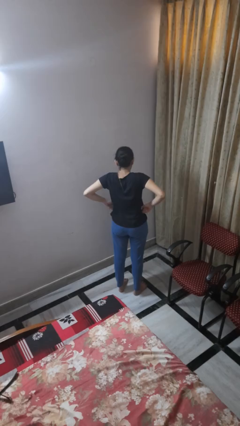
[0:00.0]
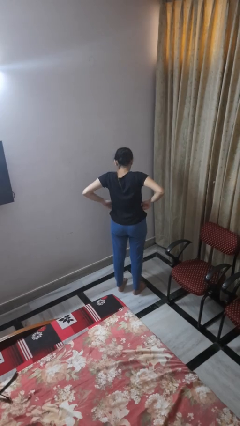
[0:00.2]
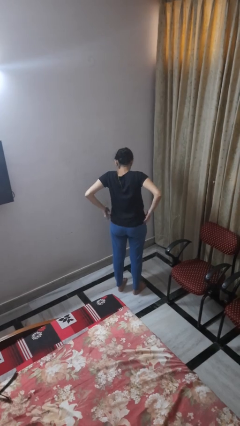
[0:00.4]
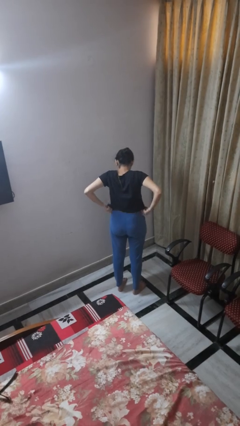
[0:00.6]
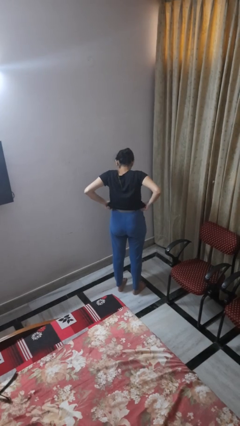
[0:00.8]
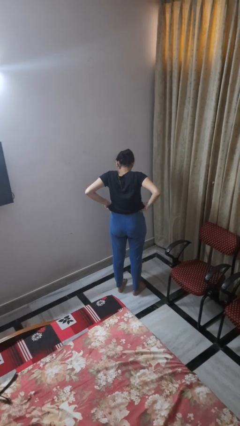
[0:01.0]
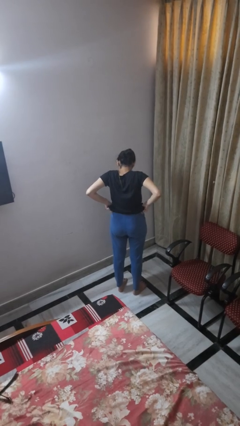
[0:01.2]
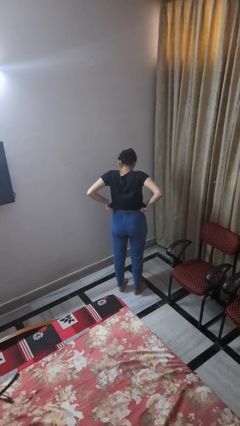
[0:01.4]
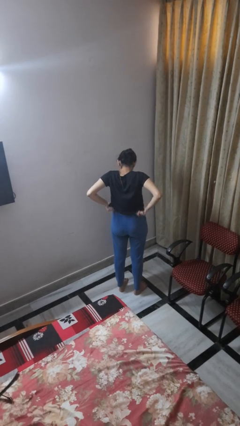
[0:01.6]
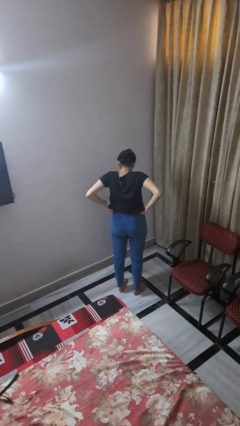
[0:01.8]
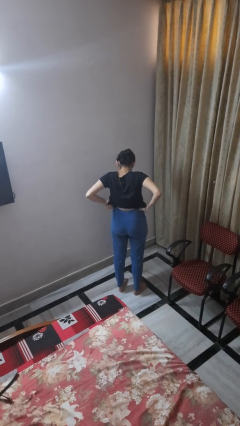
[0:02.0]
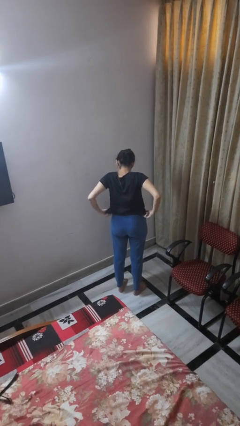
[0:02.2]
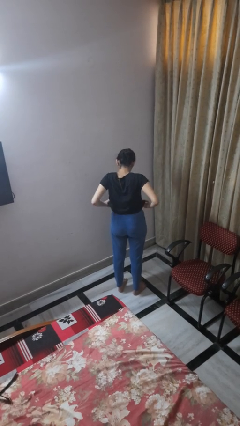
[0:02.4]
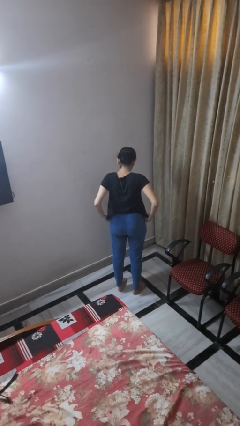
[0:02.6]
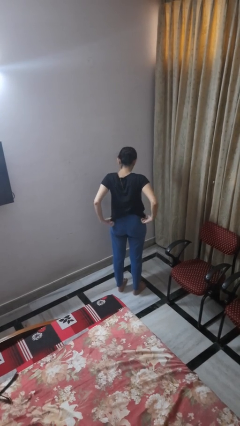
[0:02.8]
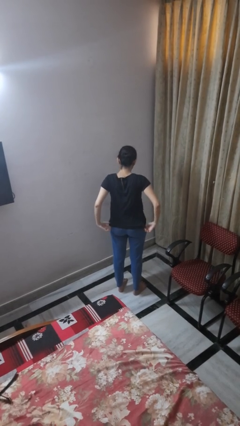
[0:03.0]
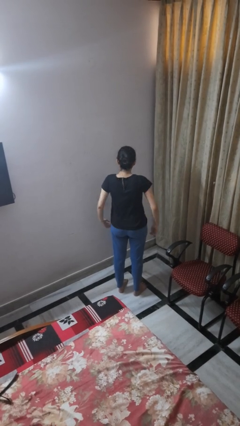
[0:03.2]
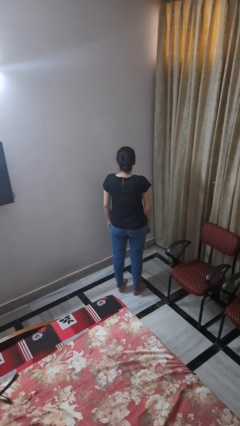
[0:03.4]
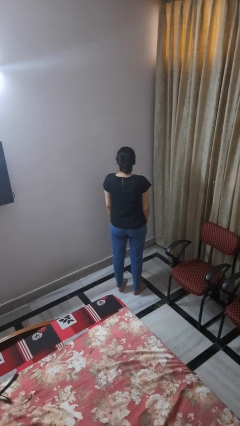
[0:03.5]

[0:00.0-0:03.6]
person hikes up pants

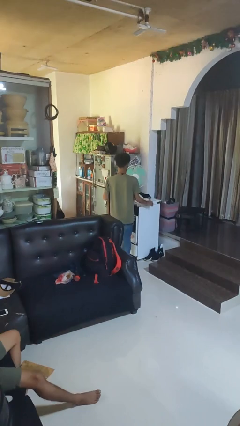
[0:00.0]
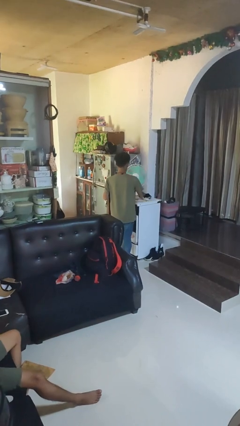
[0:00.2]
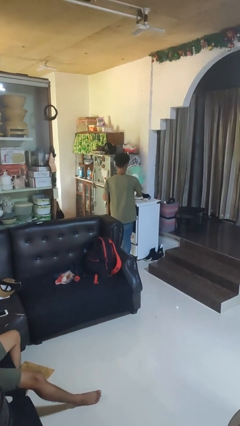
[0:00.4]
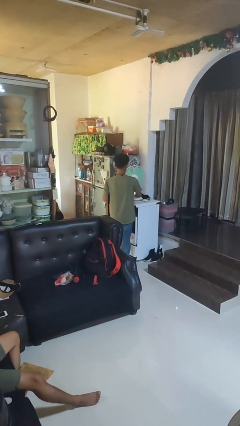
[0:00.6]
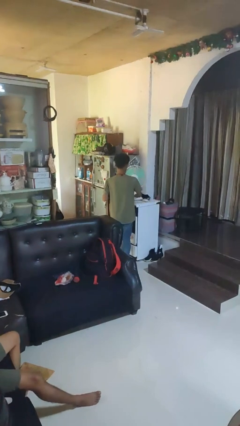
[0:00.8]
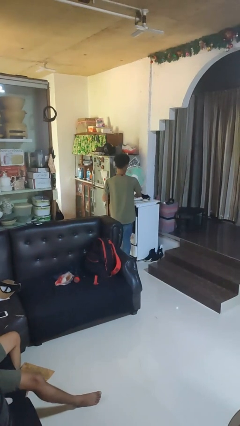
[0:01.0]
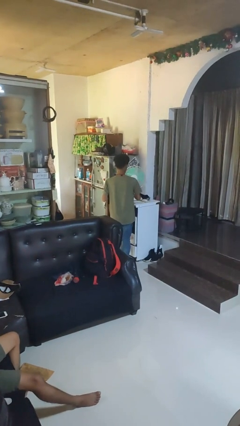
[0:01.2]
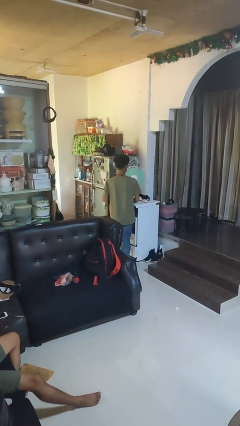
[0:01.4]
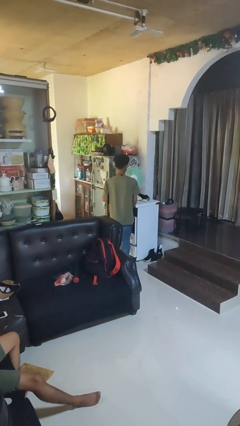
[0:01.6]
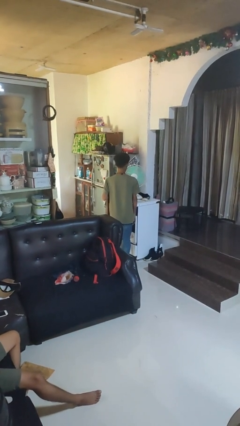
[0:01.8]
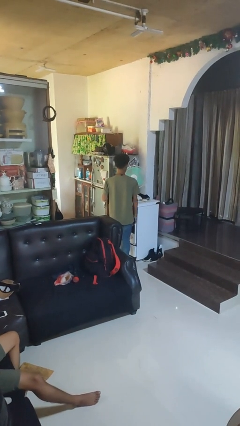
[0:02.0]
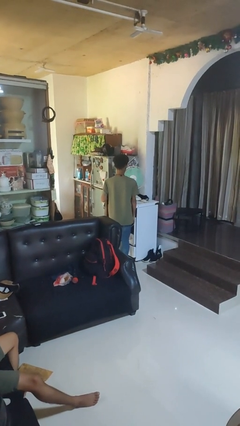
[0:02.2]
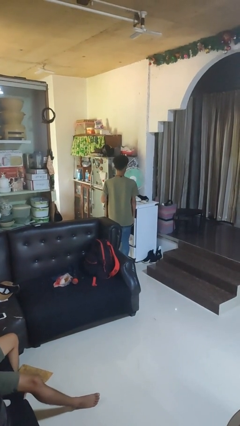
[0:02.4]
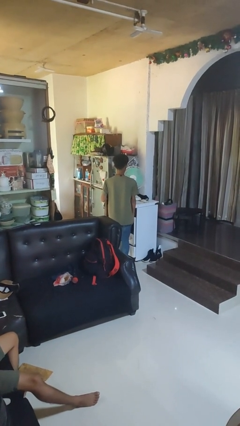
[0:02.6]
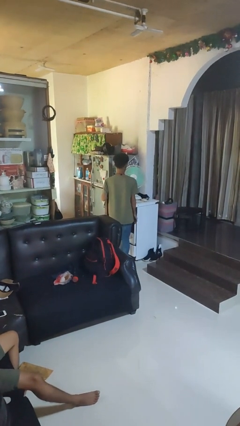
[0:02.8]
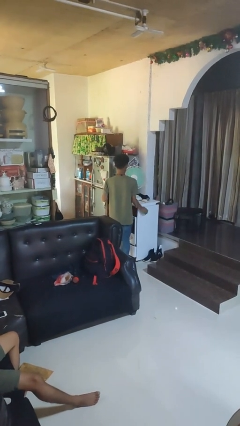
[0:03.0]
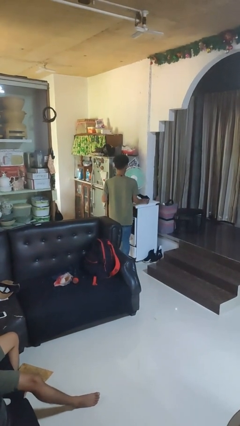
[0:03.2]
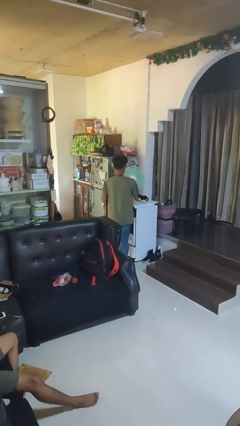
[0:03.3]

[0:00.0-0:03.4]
person turns on fan

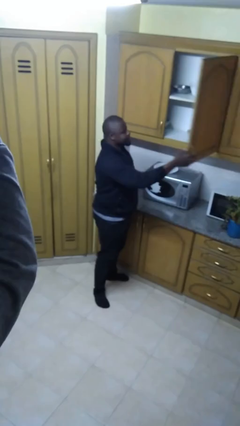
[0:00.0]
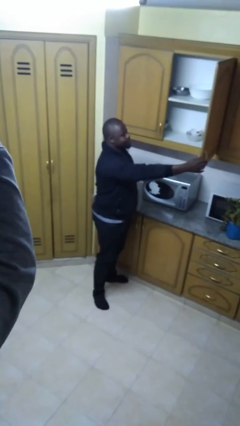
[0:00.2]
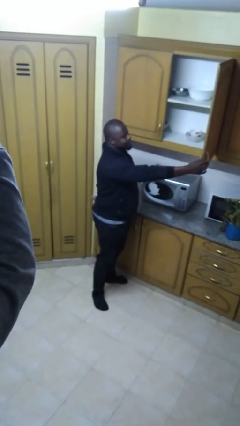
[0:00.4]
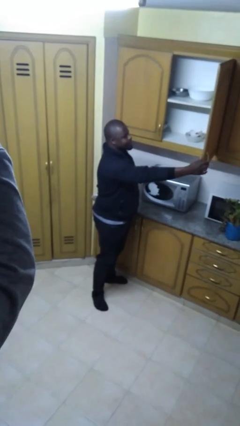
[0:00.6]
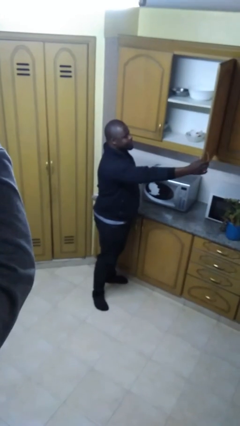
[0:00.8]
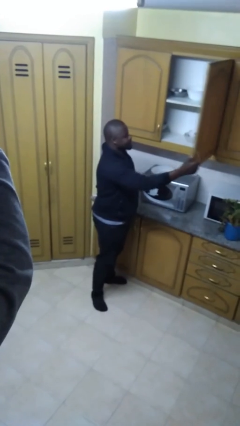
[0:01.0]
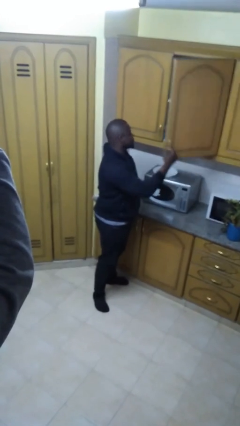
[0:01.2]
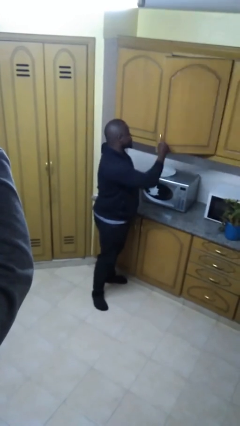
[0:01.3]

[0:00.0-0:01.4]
person opens cabinet

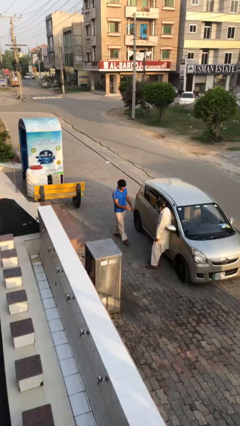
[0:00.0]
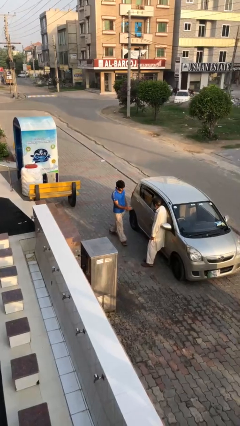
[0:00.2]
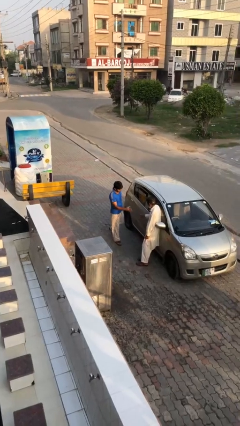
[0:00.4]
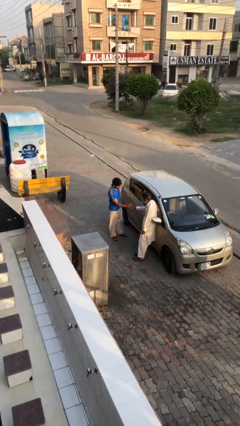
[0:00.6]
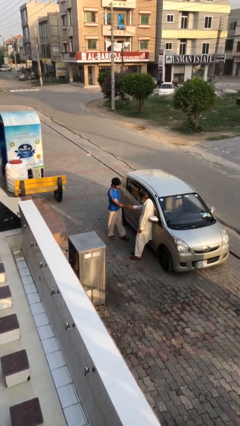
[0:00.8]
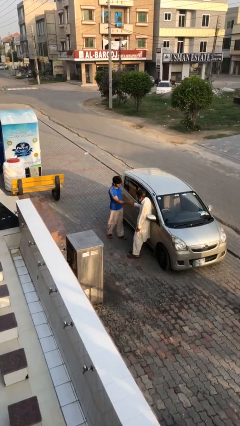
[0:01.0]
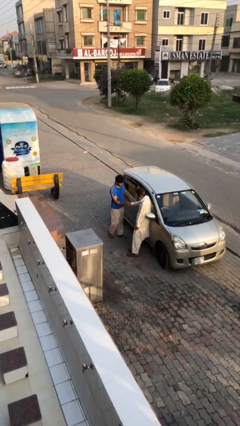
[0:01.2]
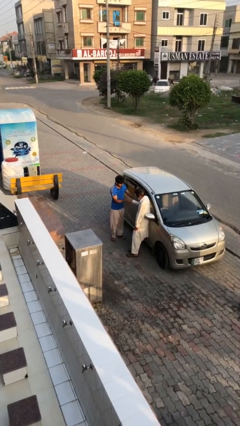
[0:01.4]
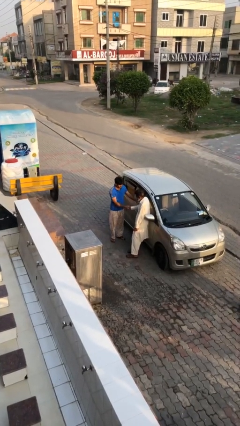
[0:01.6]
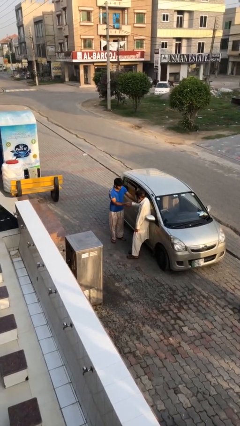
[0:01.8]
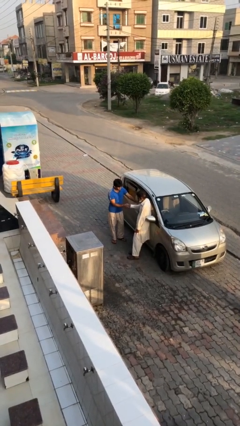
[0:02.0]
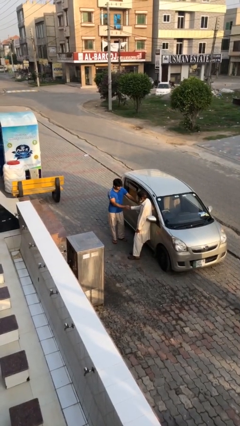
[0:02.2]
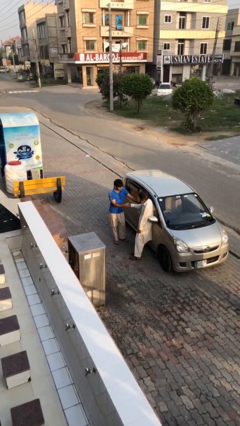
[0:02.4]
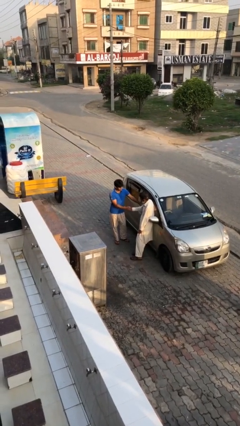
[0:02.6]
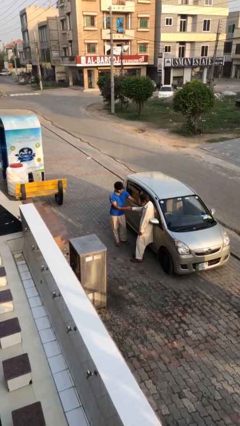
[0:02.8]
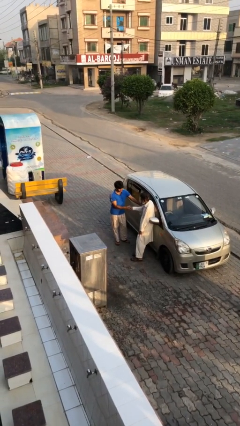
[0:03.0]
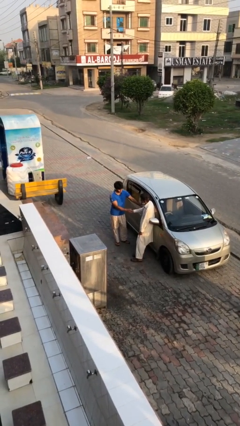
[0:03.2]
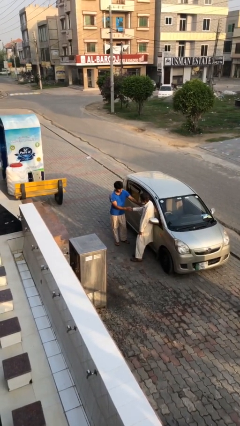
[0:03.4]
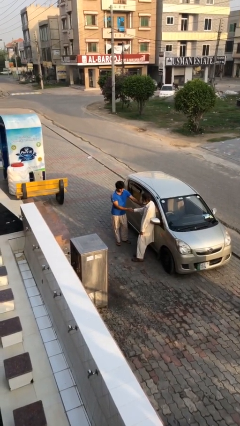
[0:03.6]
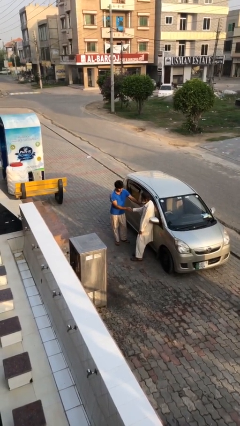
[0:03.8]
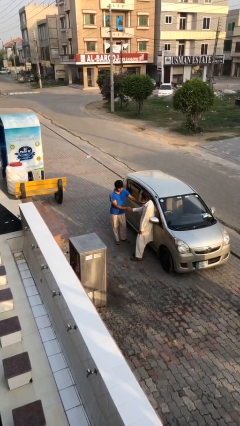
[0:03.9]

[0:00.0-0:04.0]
person shakes hand

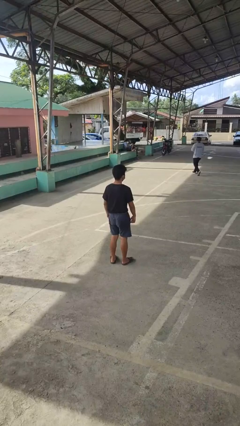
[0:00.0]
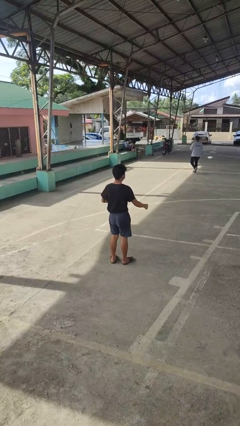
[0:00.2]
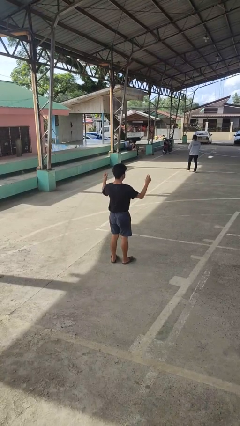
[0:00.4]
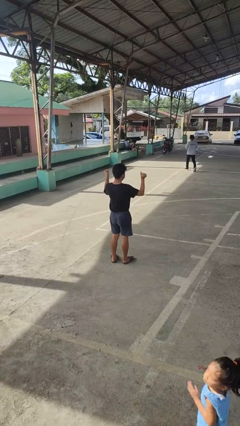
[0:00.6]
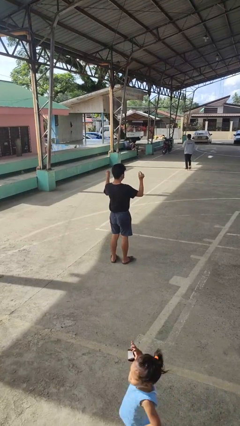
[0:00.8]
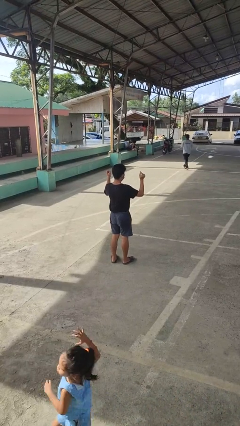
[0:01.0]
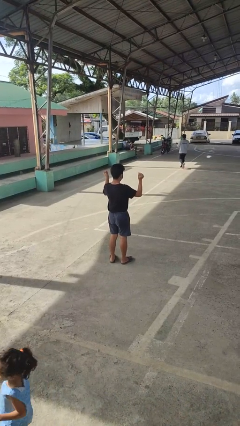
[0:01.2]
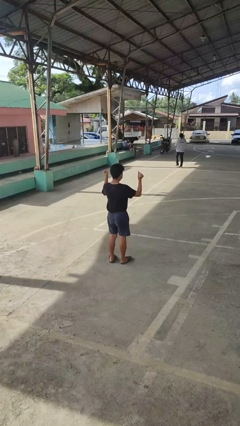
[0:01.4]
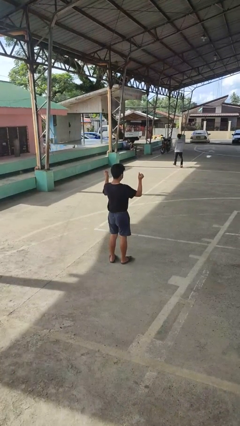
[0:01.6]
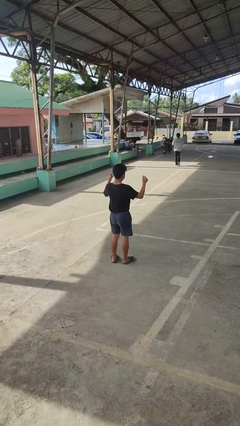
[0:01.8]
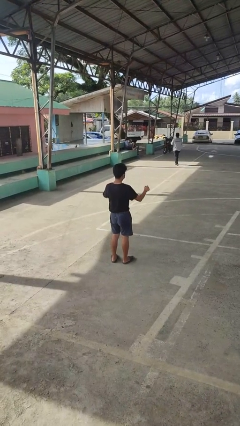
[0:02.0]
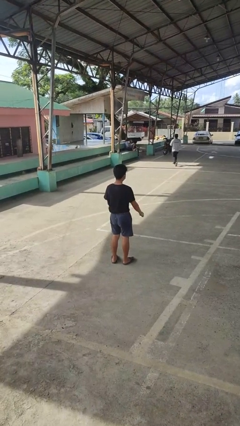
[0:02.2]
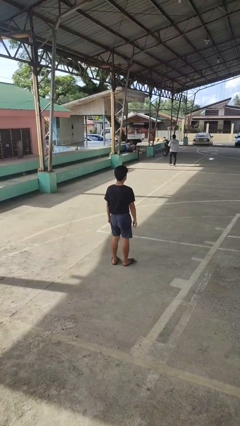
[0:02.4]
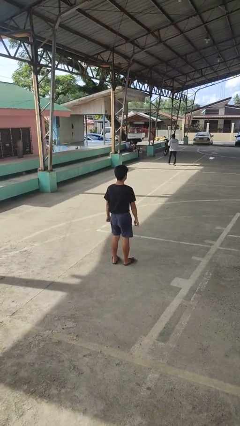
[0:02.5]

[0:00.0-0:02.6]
person snaps fingers

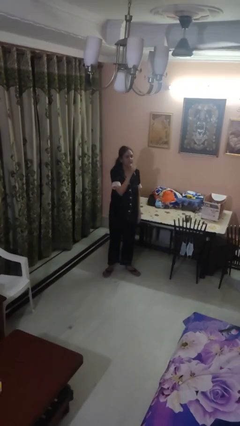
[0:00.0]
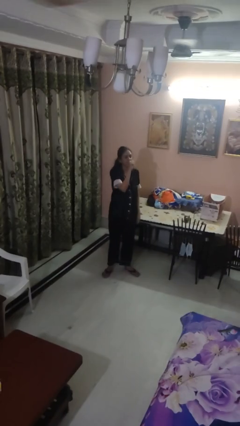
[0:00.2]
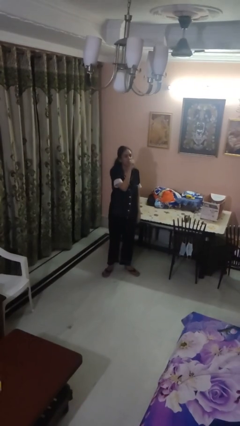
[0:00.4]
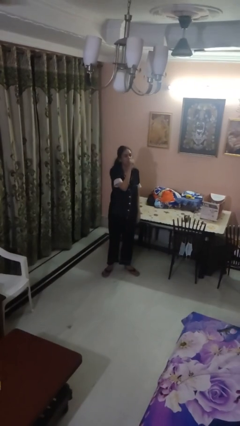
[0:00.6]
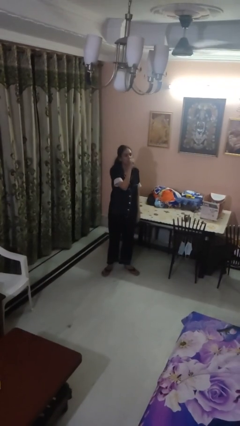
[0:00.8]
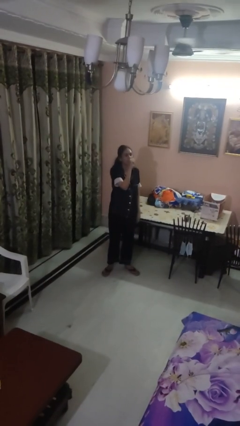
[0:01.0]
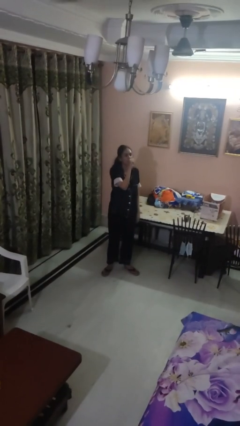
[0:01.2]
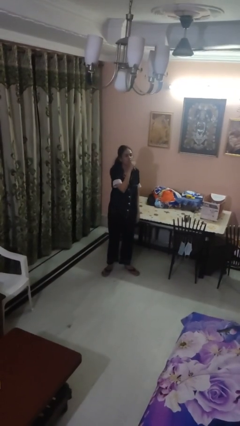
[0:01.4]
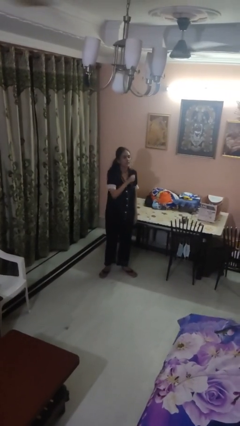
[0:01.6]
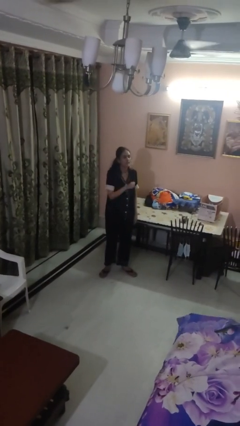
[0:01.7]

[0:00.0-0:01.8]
person vapes

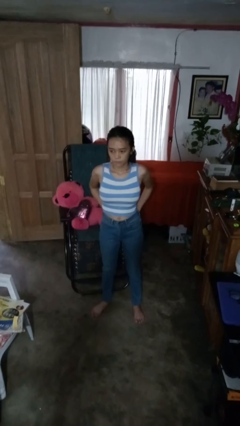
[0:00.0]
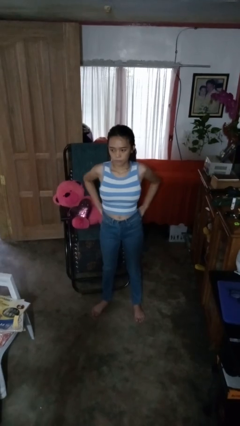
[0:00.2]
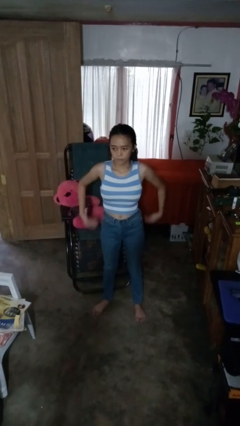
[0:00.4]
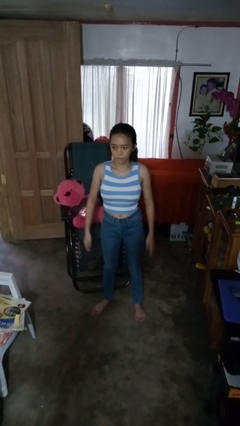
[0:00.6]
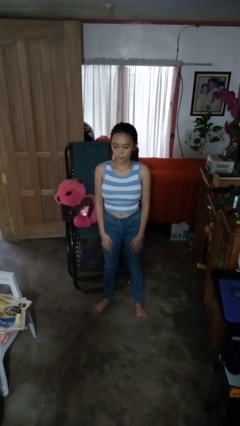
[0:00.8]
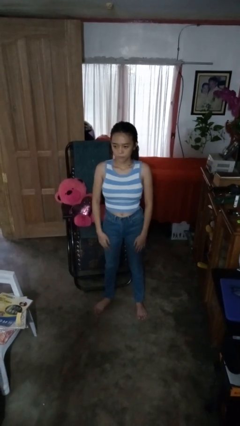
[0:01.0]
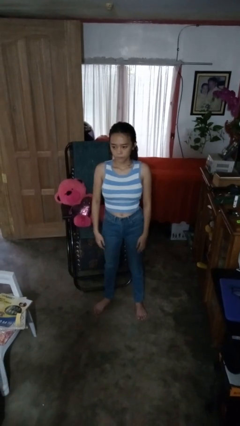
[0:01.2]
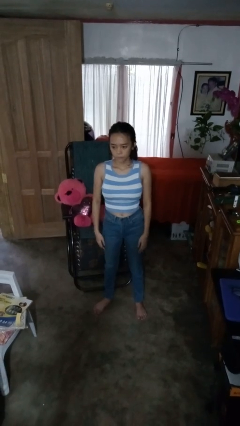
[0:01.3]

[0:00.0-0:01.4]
person puts hands in back pockets
